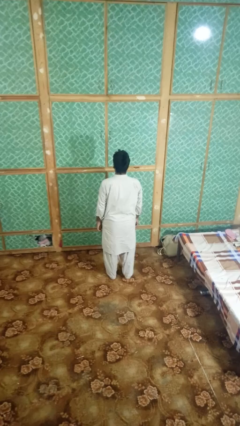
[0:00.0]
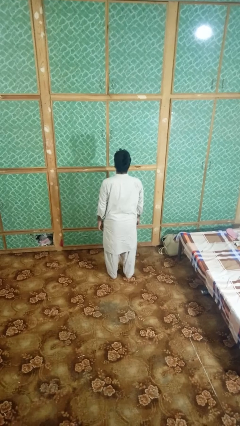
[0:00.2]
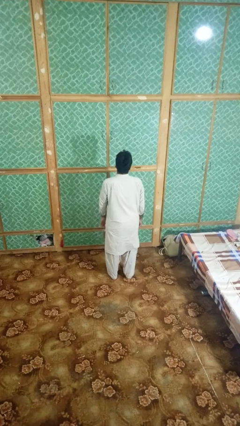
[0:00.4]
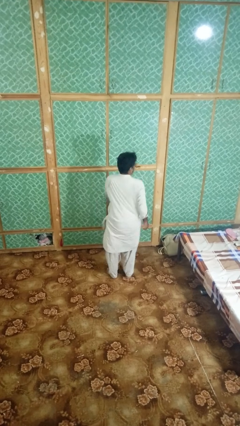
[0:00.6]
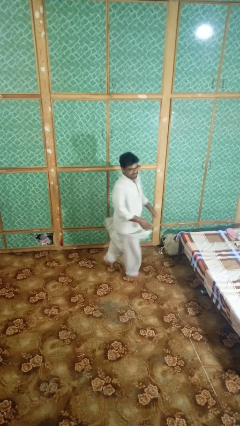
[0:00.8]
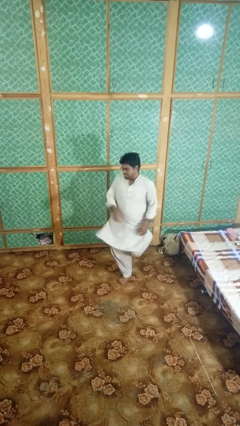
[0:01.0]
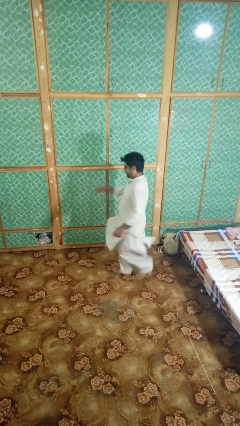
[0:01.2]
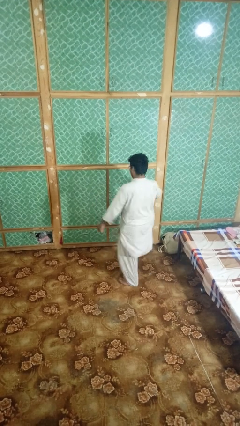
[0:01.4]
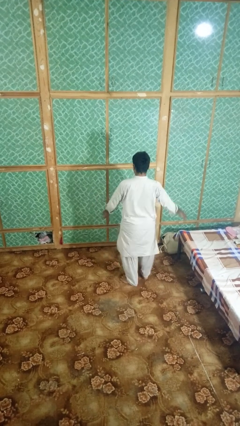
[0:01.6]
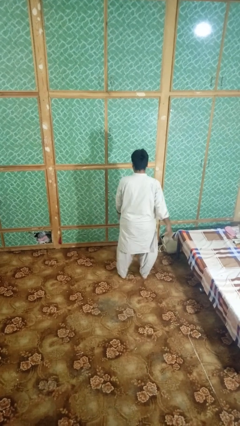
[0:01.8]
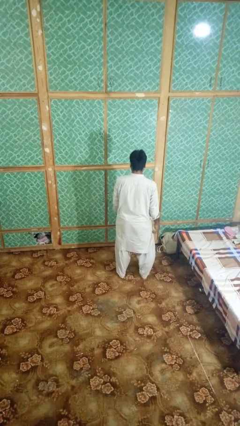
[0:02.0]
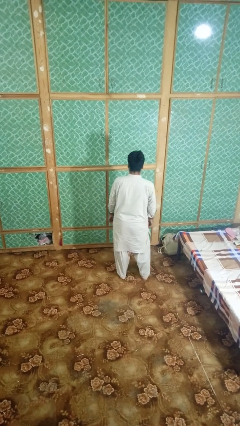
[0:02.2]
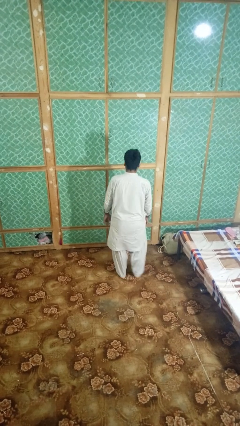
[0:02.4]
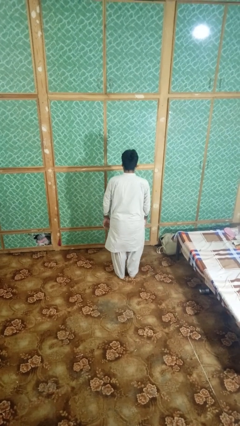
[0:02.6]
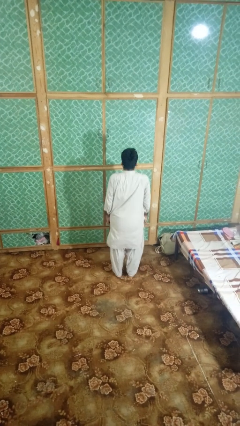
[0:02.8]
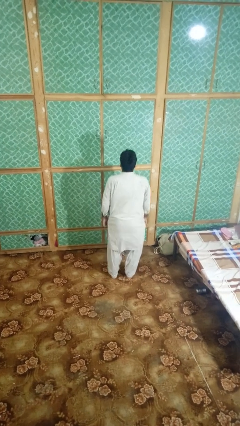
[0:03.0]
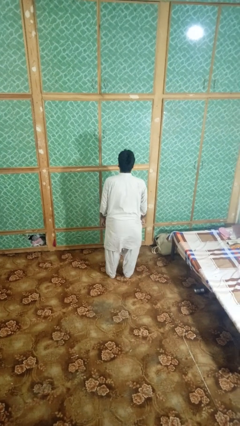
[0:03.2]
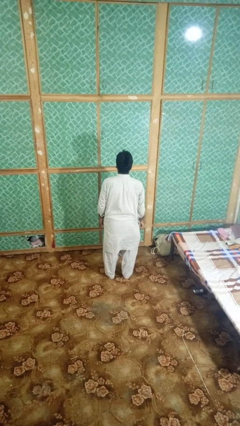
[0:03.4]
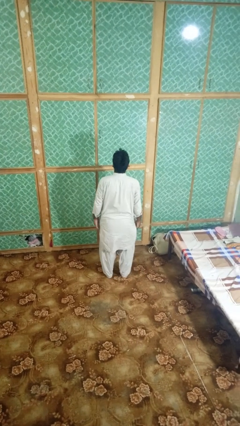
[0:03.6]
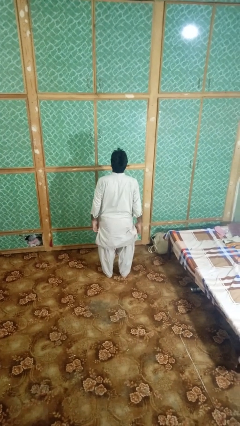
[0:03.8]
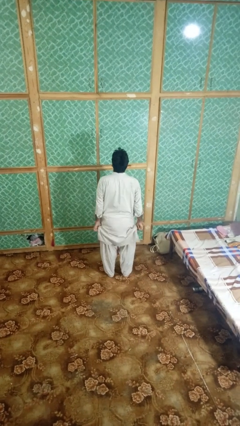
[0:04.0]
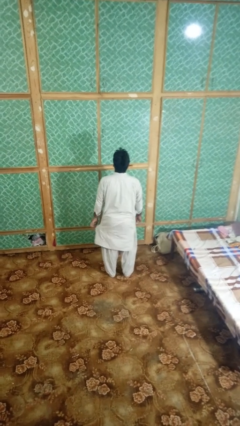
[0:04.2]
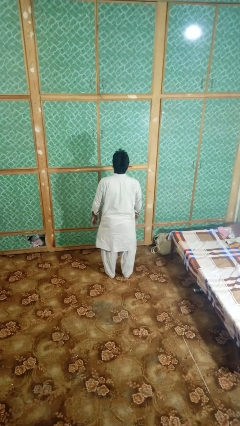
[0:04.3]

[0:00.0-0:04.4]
person twirls

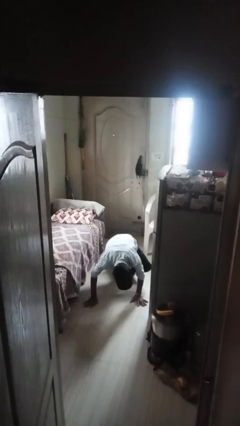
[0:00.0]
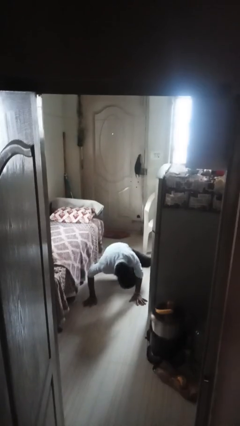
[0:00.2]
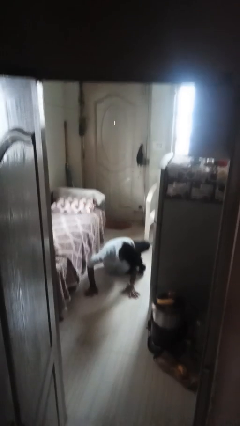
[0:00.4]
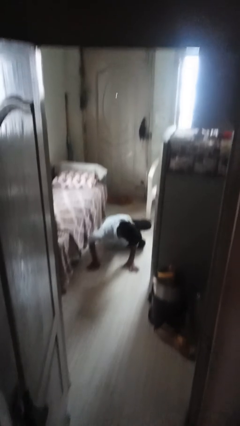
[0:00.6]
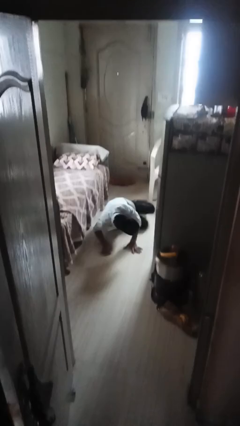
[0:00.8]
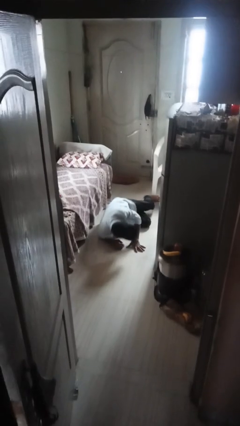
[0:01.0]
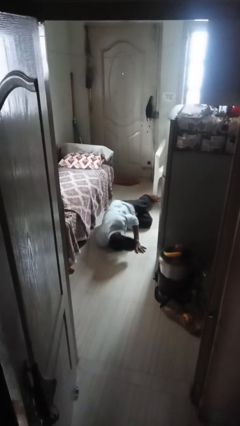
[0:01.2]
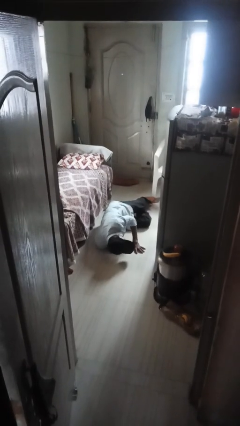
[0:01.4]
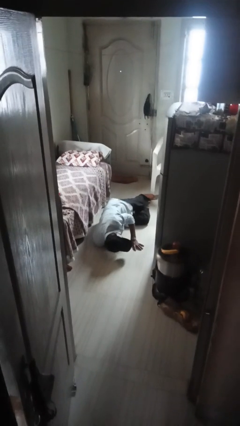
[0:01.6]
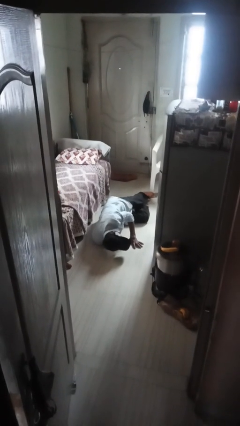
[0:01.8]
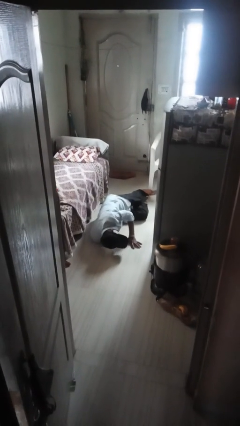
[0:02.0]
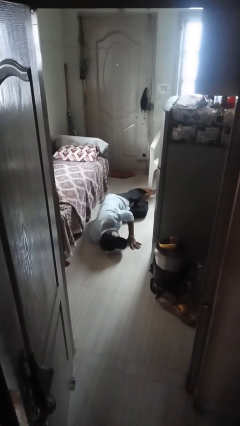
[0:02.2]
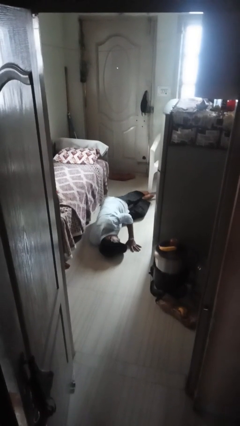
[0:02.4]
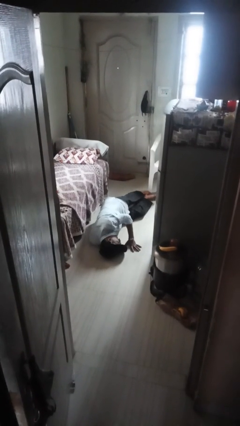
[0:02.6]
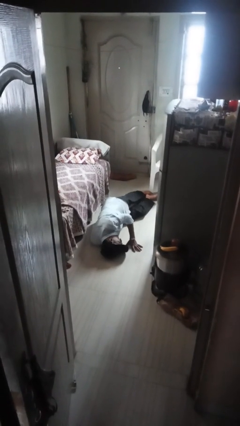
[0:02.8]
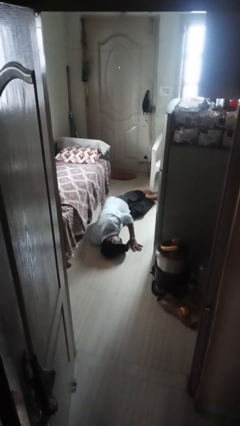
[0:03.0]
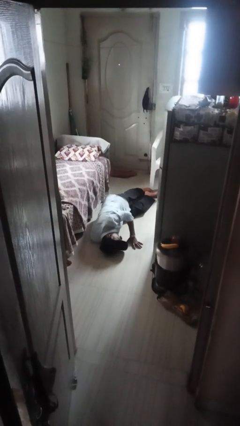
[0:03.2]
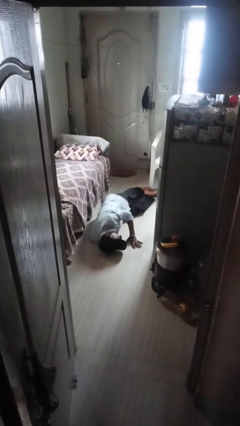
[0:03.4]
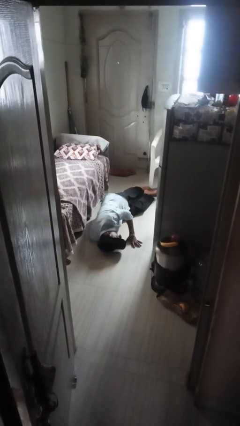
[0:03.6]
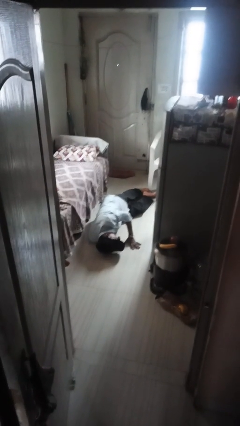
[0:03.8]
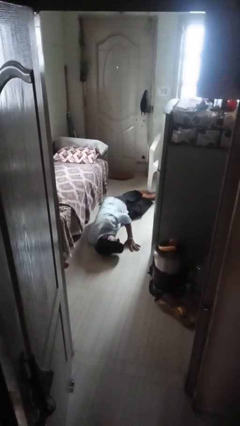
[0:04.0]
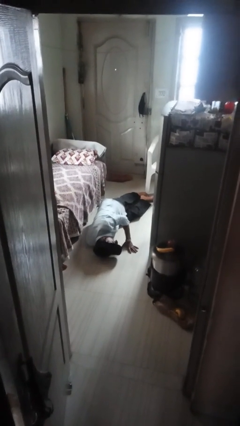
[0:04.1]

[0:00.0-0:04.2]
person lies down on floor

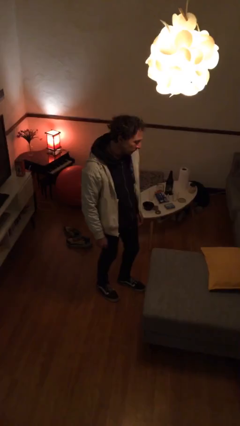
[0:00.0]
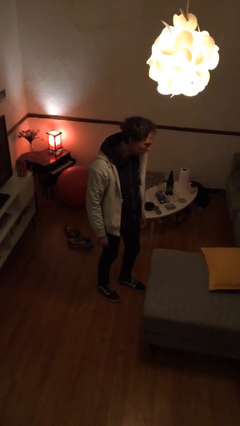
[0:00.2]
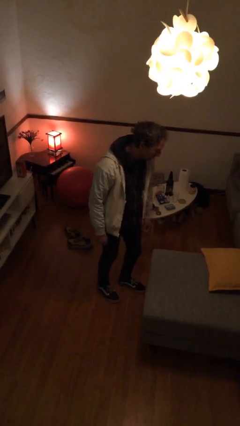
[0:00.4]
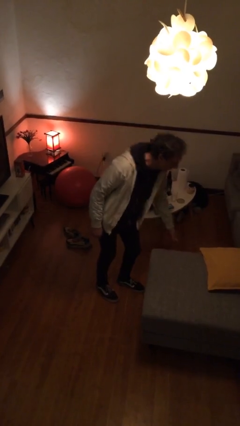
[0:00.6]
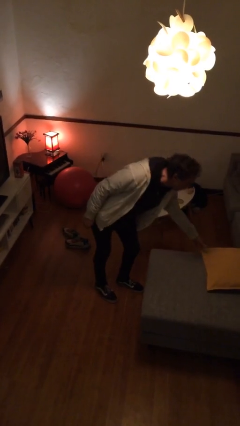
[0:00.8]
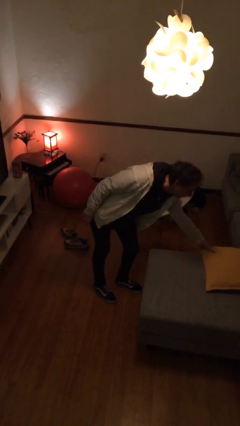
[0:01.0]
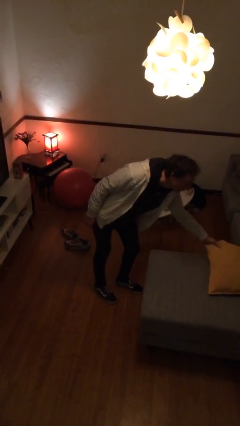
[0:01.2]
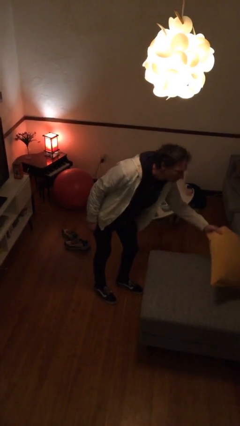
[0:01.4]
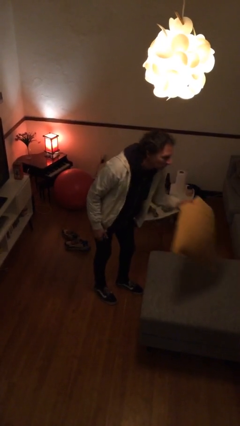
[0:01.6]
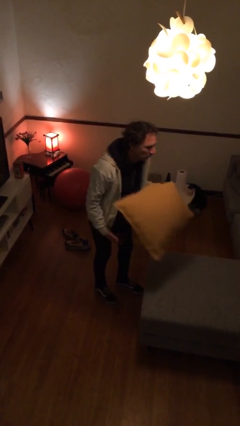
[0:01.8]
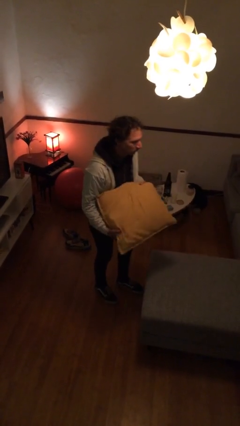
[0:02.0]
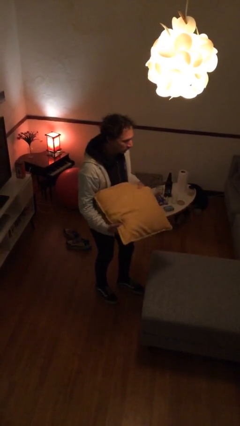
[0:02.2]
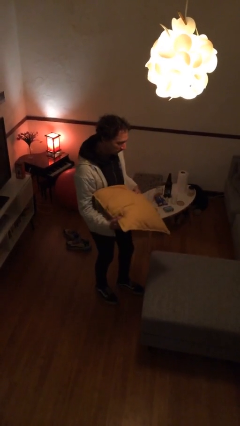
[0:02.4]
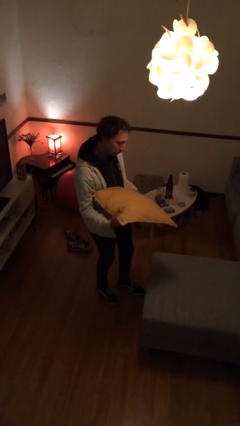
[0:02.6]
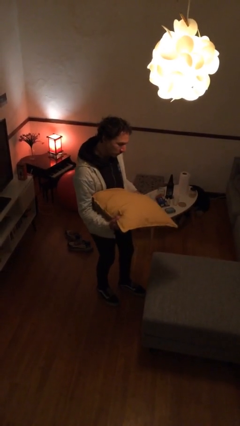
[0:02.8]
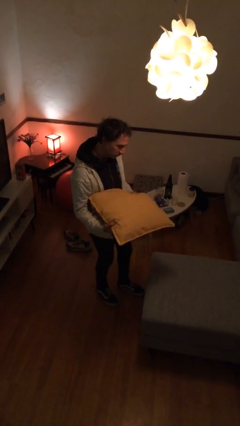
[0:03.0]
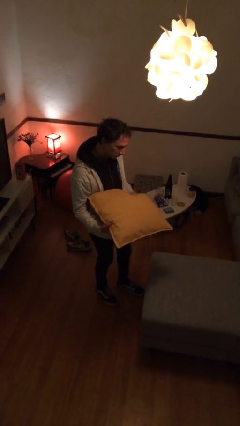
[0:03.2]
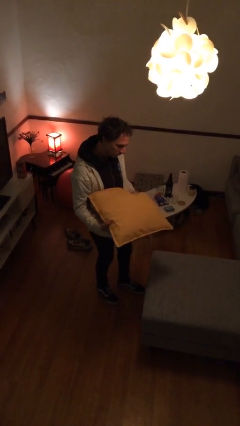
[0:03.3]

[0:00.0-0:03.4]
person picks up object from couch

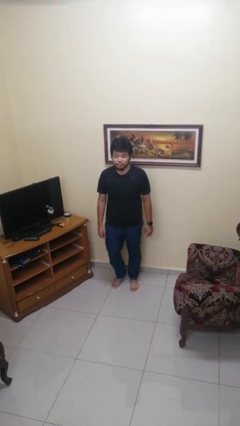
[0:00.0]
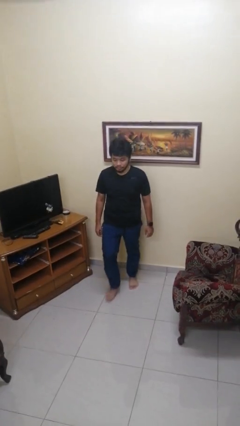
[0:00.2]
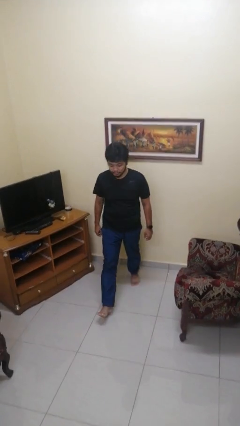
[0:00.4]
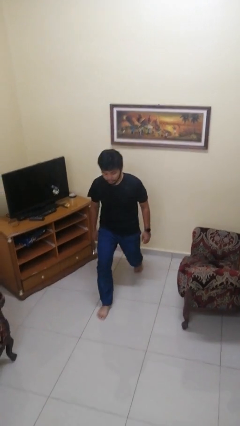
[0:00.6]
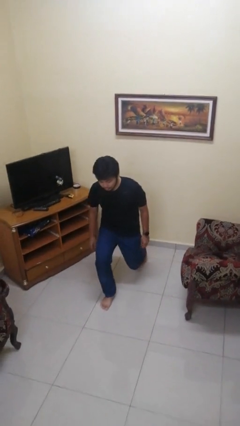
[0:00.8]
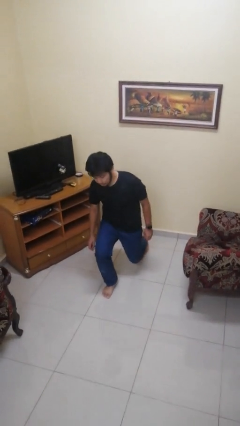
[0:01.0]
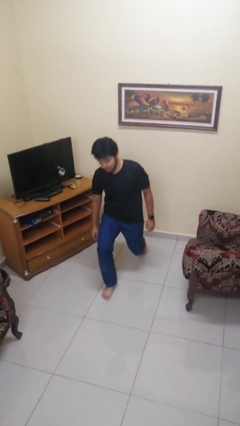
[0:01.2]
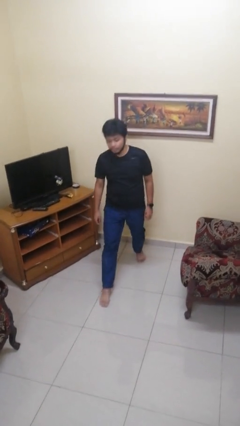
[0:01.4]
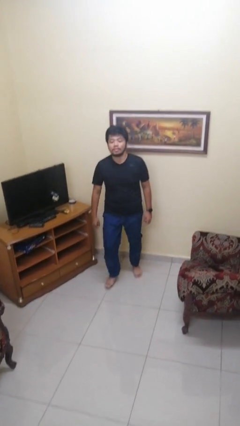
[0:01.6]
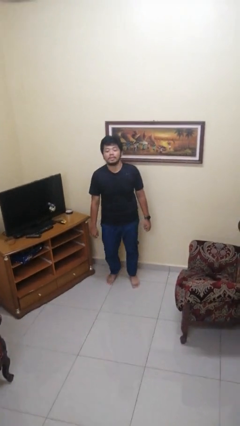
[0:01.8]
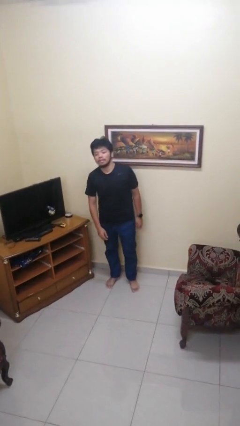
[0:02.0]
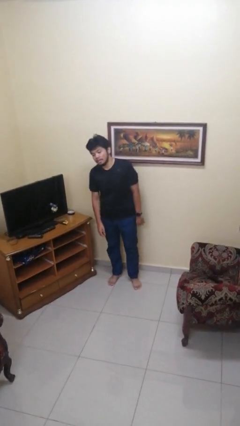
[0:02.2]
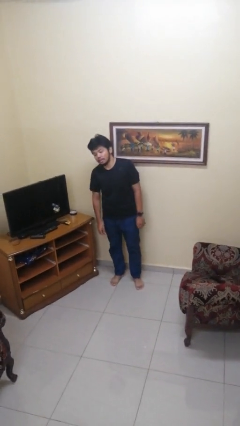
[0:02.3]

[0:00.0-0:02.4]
person exercises with lunges

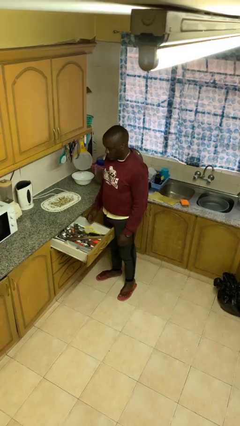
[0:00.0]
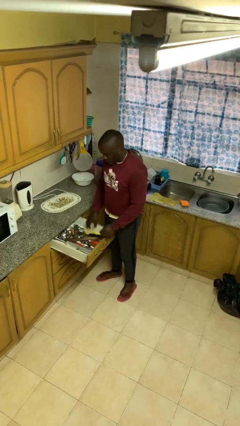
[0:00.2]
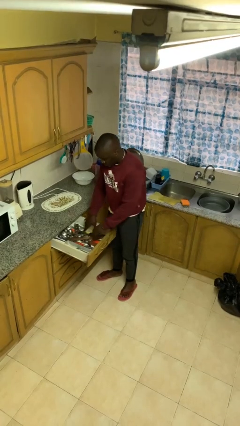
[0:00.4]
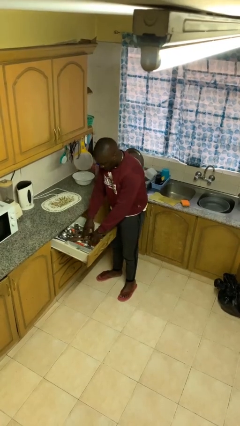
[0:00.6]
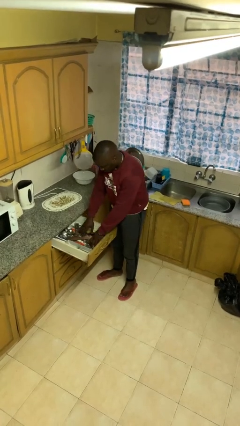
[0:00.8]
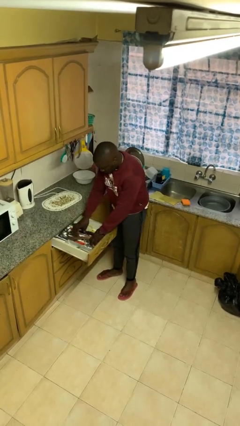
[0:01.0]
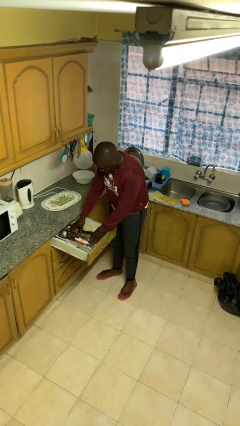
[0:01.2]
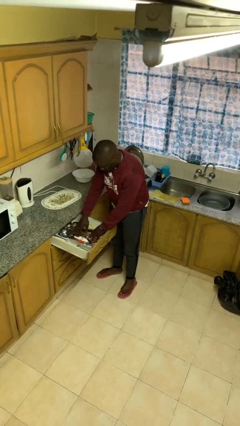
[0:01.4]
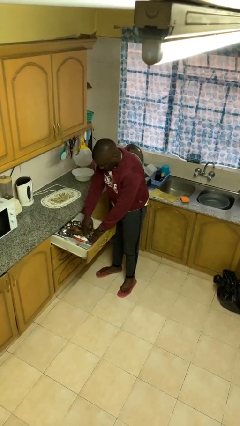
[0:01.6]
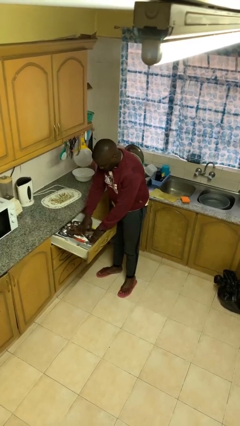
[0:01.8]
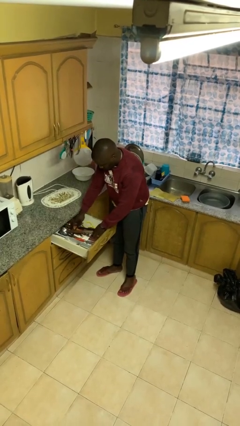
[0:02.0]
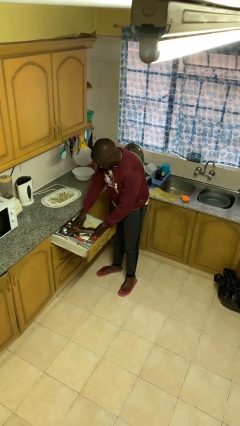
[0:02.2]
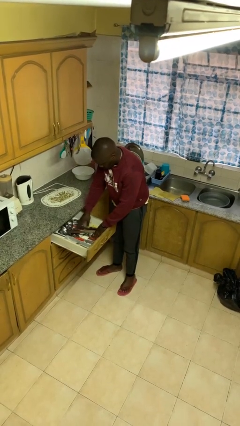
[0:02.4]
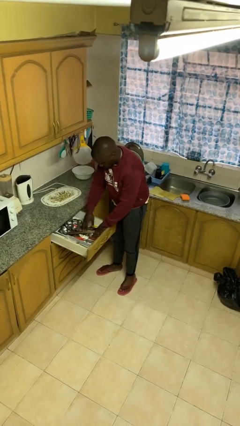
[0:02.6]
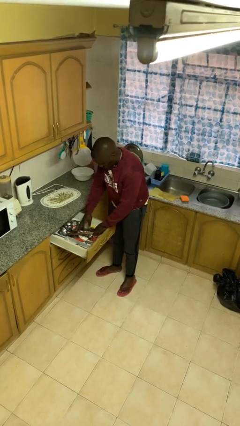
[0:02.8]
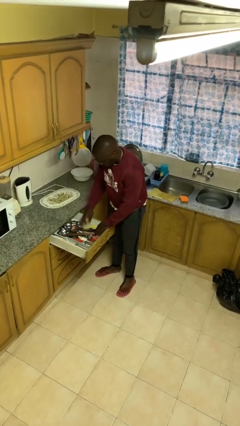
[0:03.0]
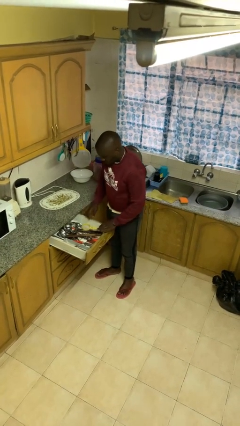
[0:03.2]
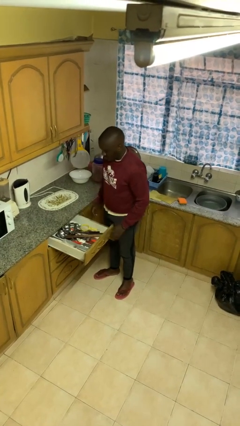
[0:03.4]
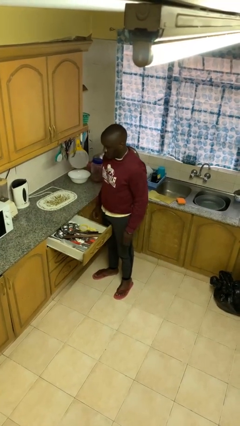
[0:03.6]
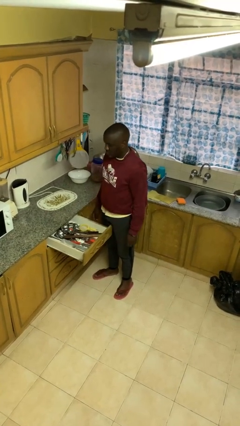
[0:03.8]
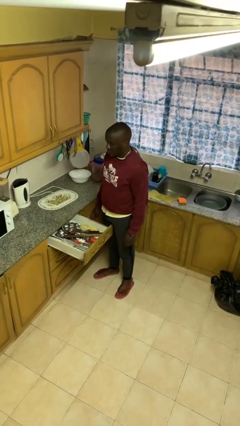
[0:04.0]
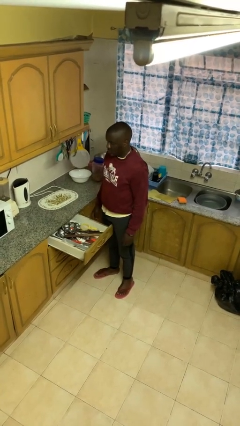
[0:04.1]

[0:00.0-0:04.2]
person searches in kitchen drawer
